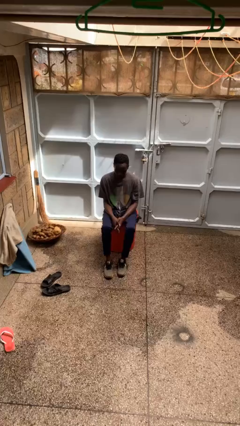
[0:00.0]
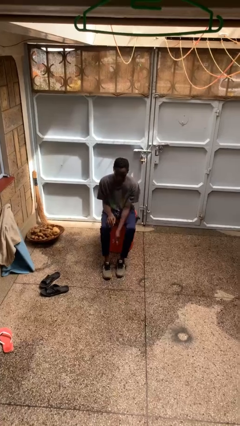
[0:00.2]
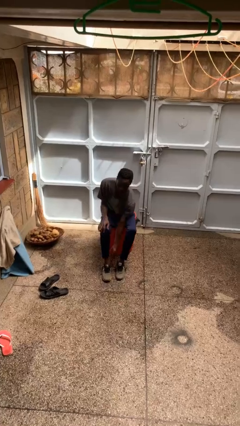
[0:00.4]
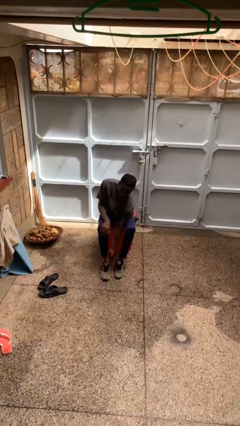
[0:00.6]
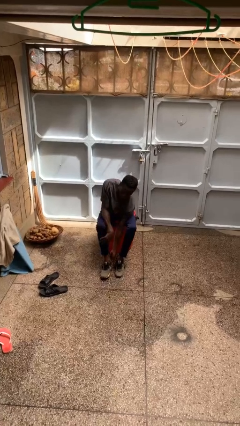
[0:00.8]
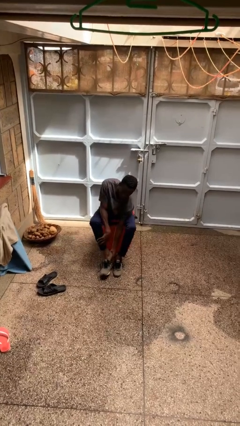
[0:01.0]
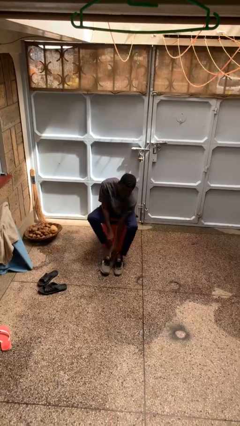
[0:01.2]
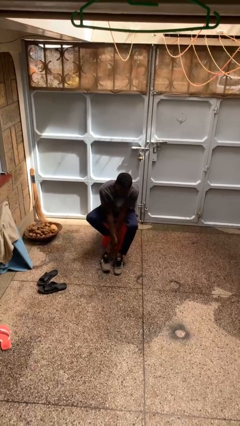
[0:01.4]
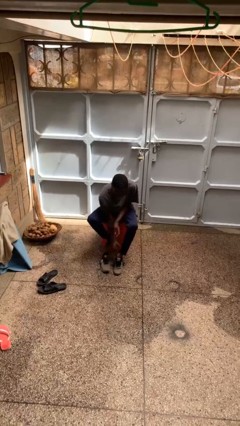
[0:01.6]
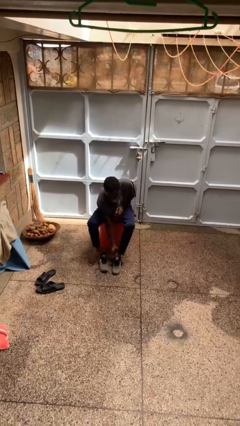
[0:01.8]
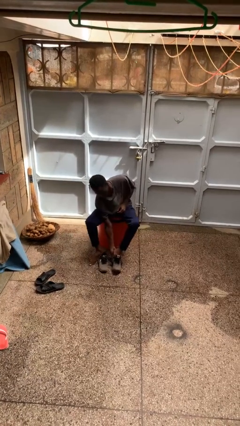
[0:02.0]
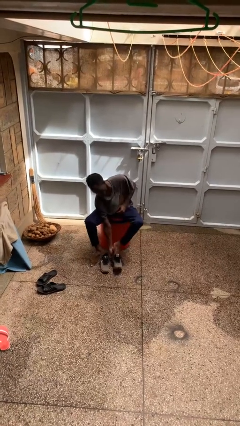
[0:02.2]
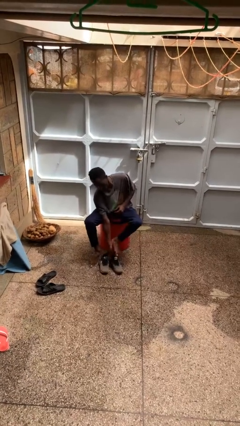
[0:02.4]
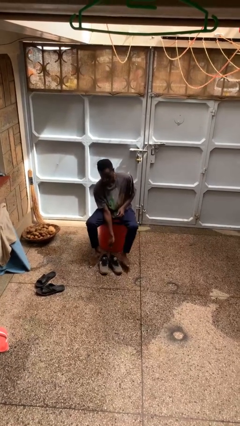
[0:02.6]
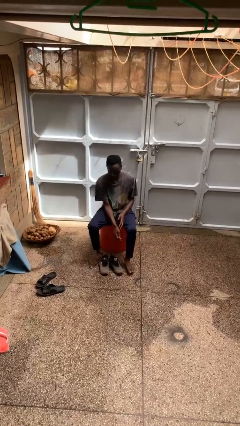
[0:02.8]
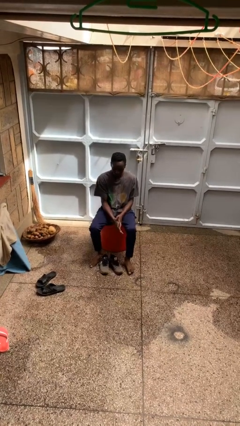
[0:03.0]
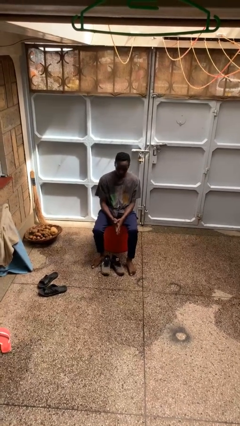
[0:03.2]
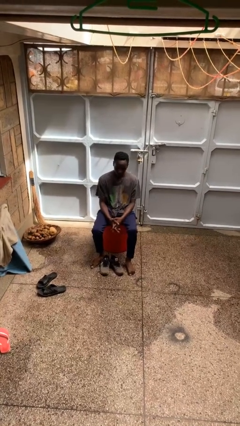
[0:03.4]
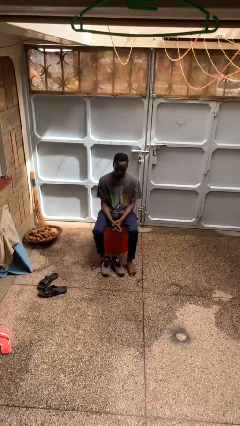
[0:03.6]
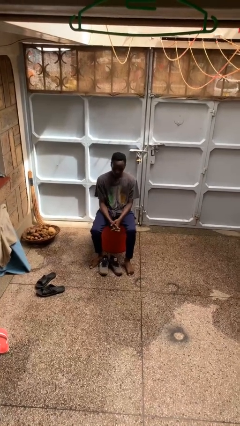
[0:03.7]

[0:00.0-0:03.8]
person takes off shoes

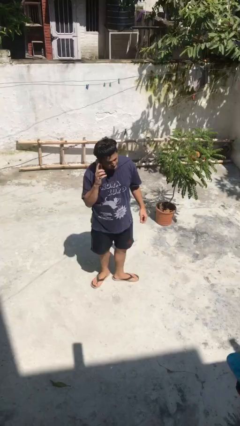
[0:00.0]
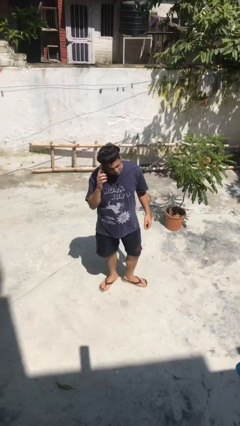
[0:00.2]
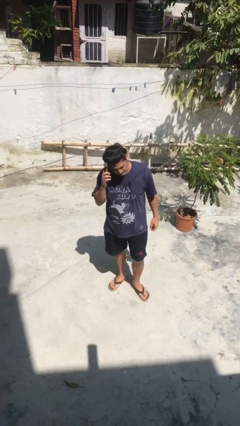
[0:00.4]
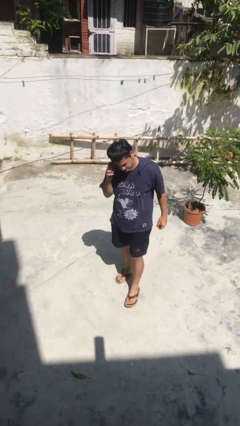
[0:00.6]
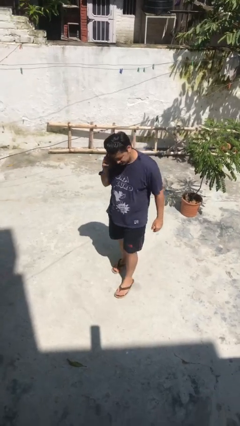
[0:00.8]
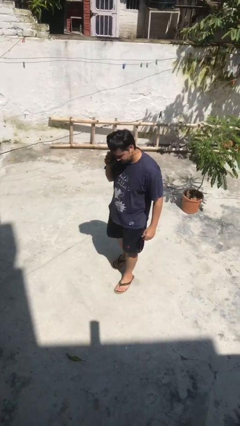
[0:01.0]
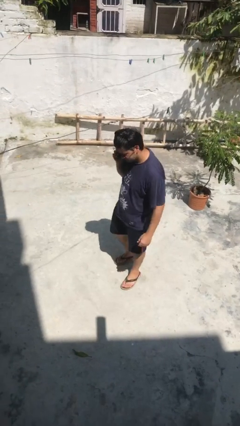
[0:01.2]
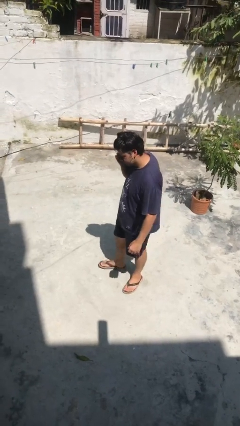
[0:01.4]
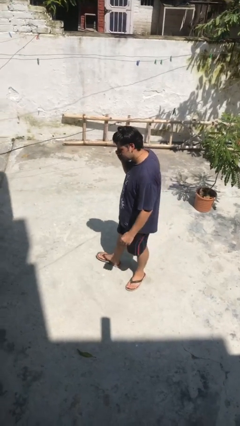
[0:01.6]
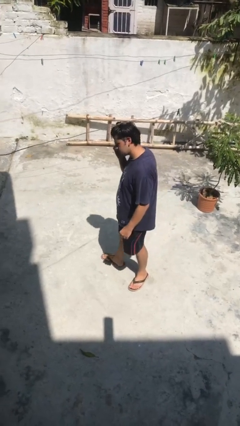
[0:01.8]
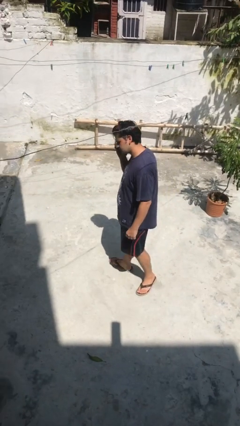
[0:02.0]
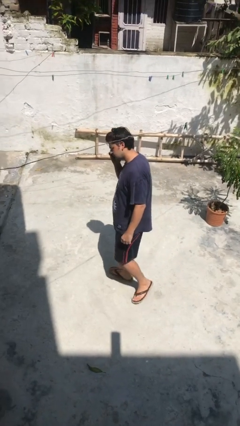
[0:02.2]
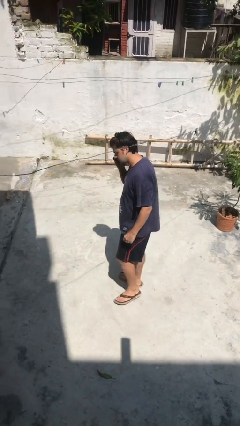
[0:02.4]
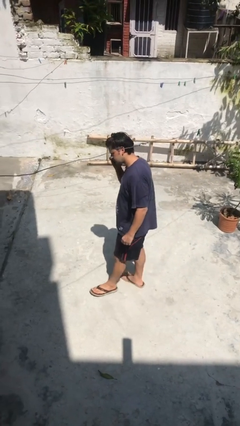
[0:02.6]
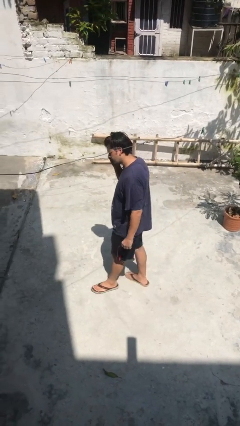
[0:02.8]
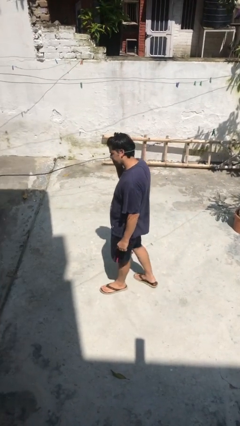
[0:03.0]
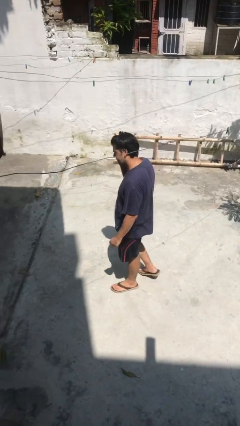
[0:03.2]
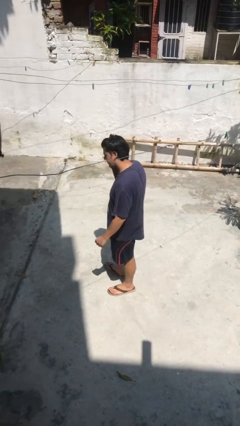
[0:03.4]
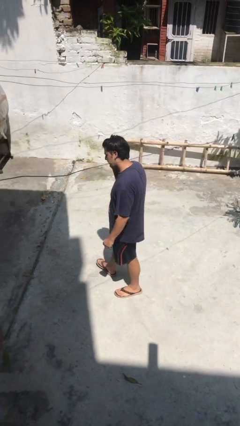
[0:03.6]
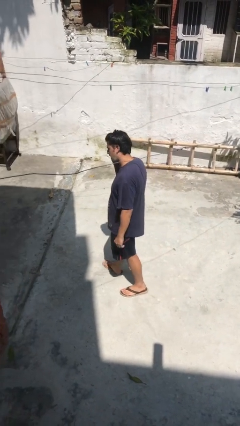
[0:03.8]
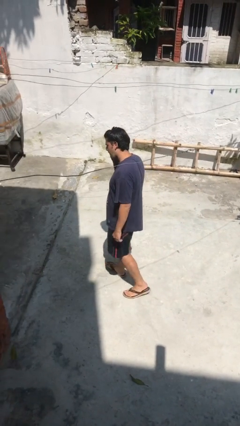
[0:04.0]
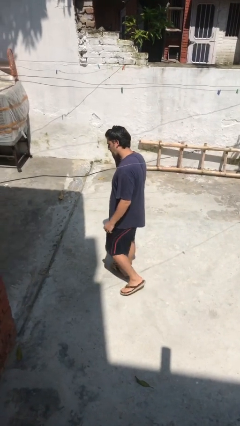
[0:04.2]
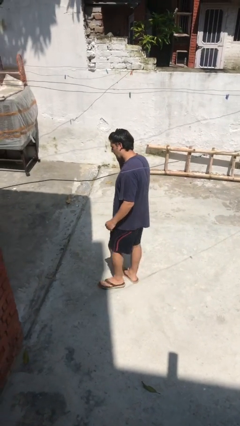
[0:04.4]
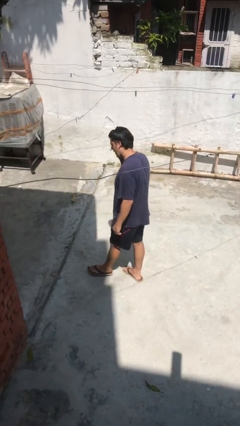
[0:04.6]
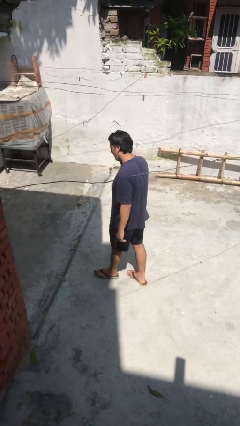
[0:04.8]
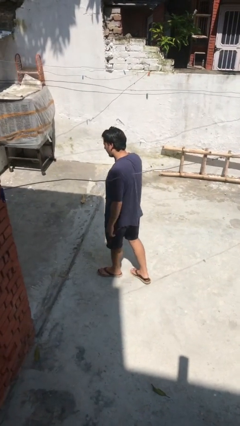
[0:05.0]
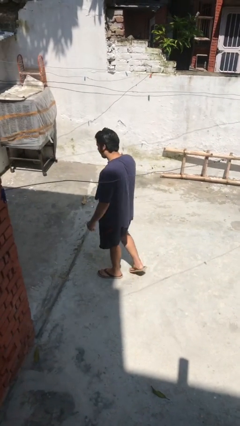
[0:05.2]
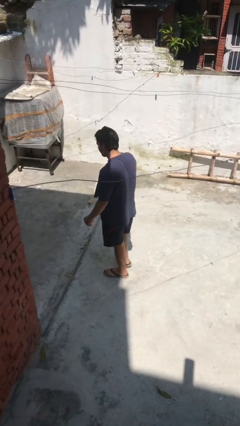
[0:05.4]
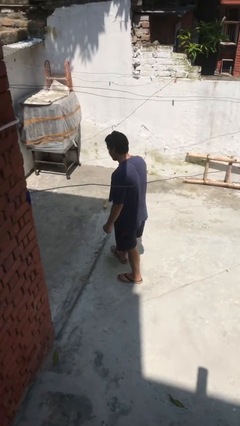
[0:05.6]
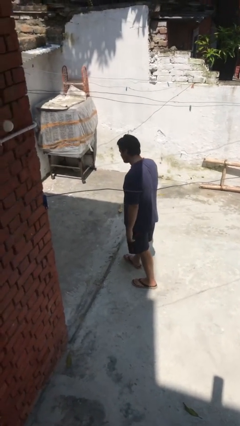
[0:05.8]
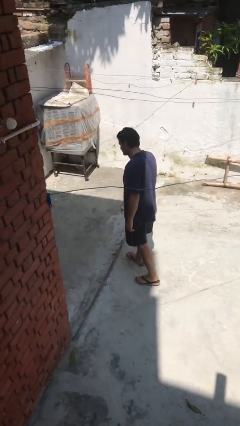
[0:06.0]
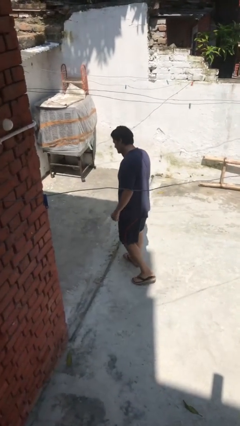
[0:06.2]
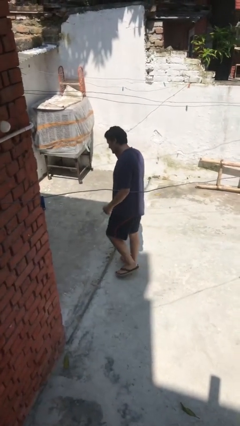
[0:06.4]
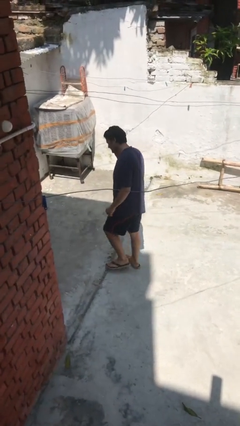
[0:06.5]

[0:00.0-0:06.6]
person talks on phone

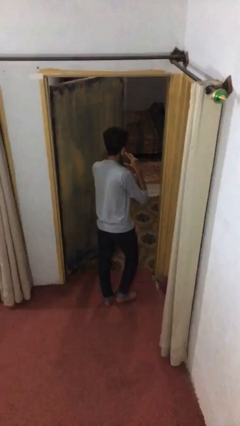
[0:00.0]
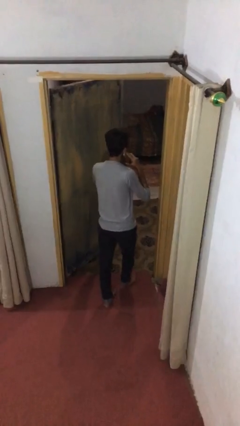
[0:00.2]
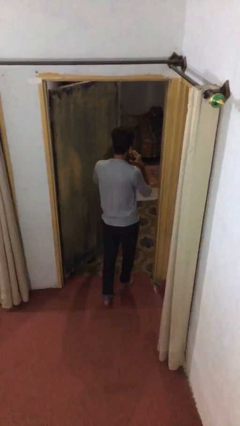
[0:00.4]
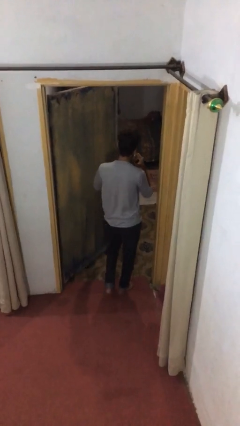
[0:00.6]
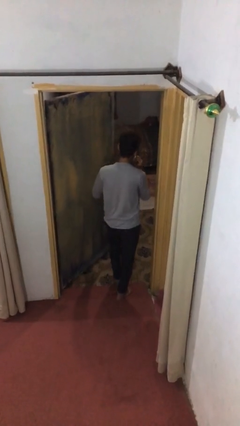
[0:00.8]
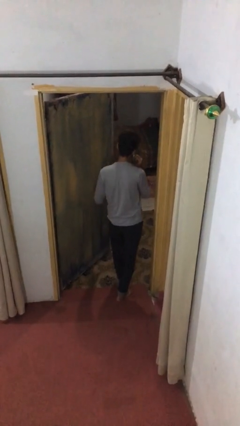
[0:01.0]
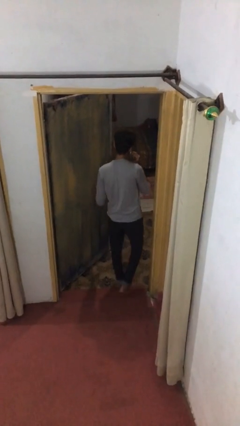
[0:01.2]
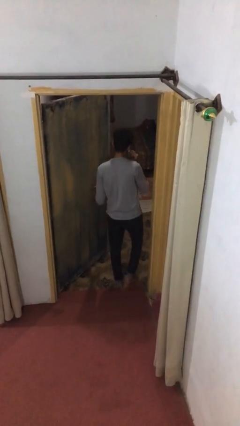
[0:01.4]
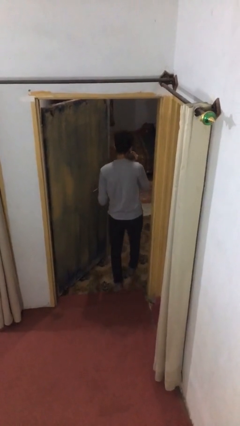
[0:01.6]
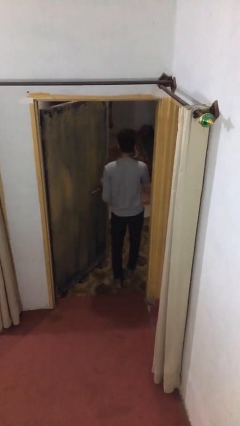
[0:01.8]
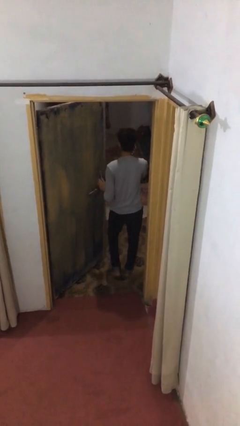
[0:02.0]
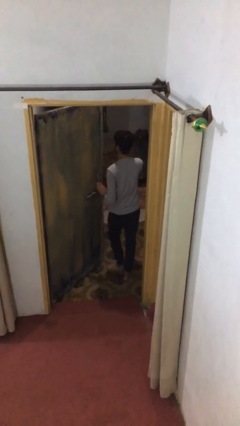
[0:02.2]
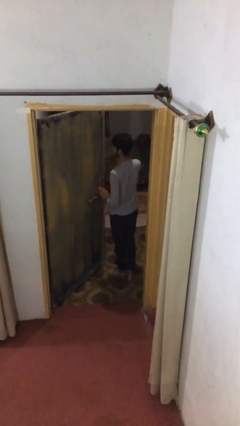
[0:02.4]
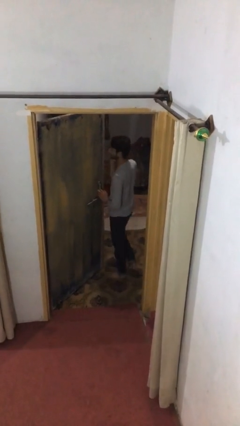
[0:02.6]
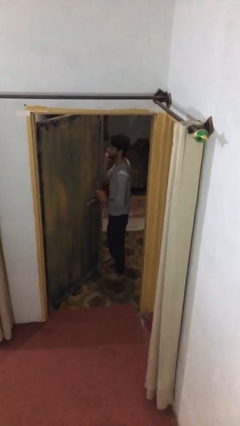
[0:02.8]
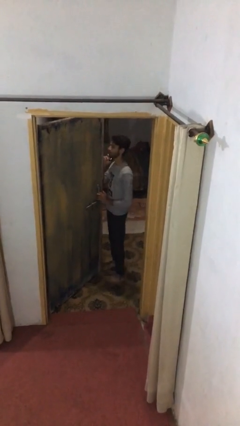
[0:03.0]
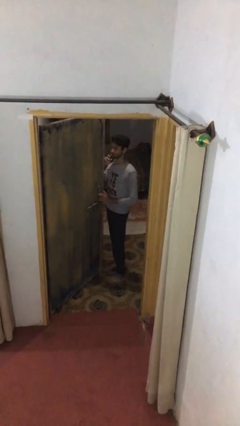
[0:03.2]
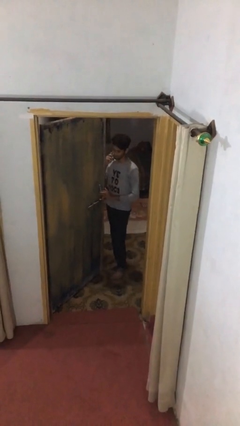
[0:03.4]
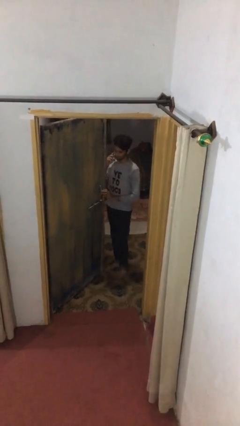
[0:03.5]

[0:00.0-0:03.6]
person exits scene through structure

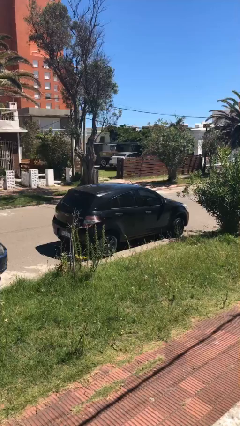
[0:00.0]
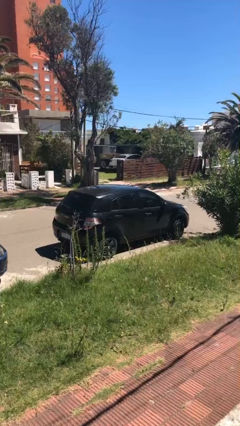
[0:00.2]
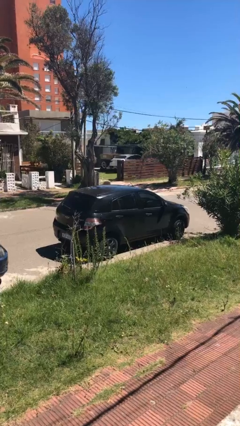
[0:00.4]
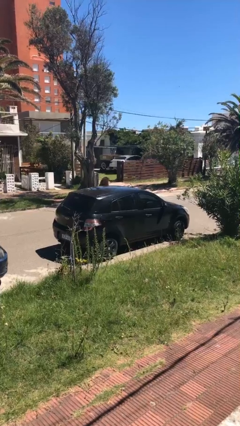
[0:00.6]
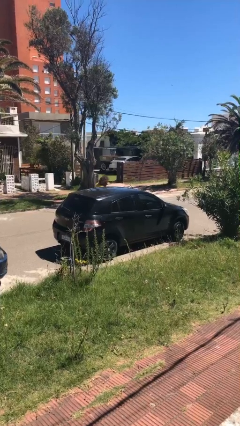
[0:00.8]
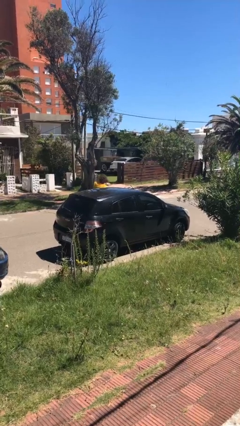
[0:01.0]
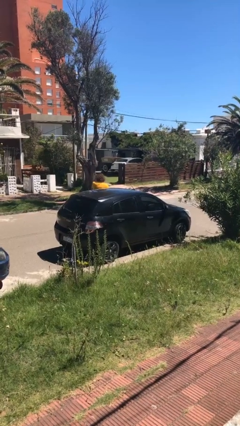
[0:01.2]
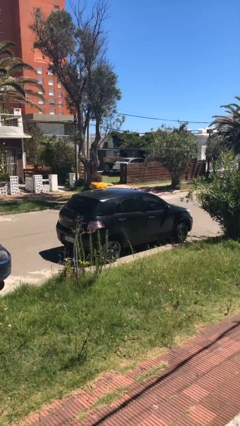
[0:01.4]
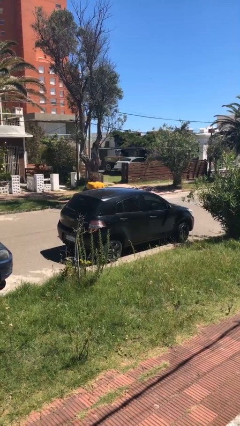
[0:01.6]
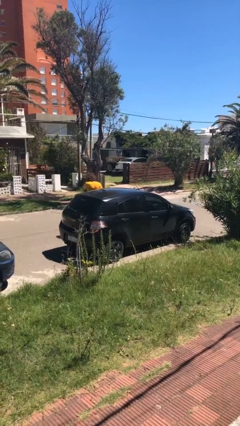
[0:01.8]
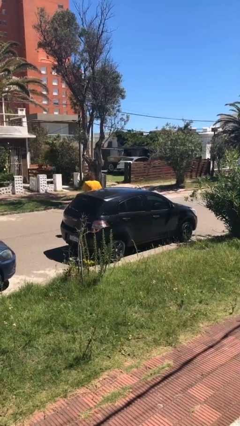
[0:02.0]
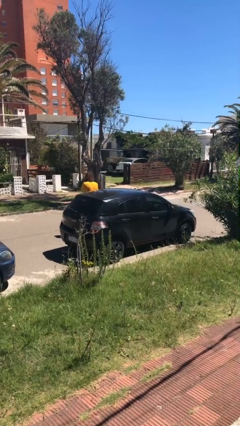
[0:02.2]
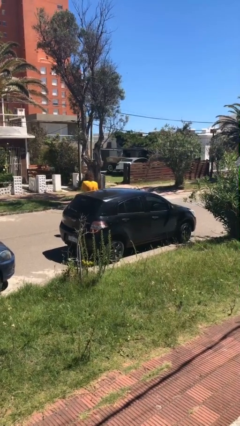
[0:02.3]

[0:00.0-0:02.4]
car drops off person

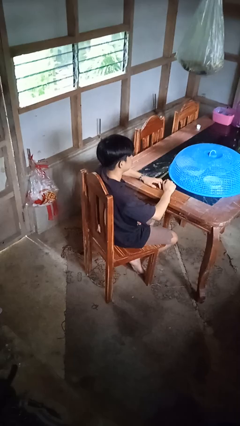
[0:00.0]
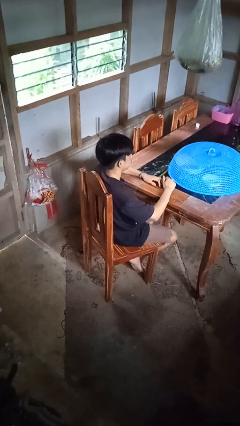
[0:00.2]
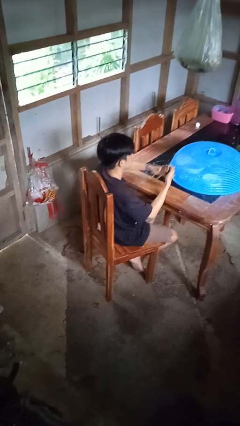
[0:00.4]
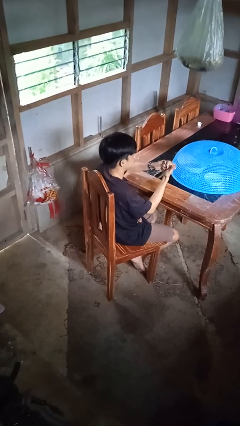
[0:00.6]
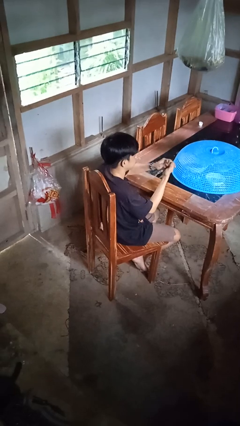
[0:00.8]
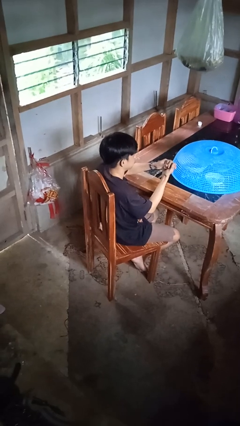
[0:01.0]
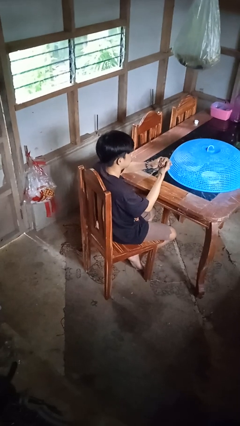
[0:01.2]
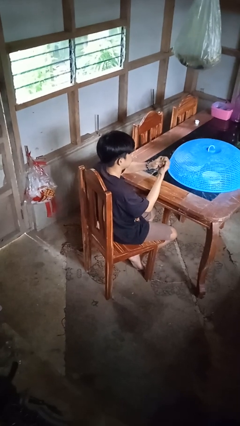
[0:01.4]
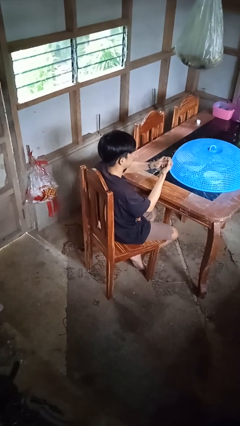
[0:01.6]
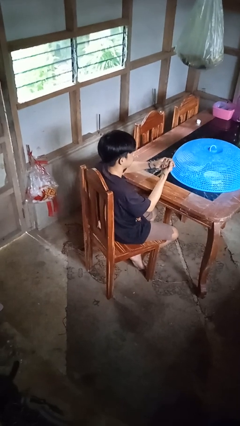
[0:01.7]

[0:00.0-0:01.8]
person cracks knuckles
